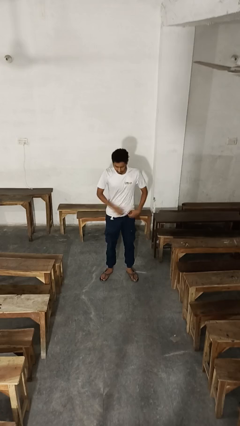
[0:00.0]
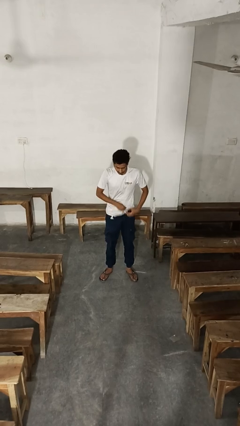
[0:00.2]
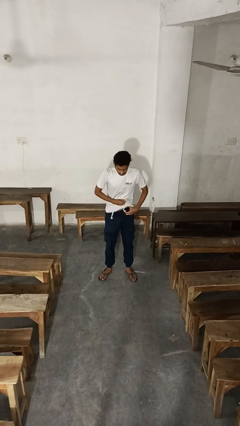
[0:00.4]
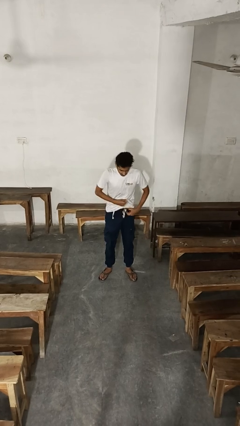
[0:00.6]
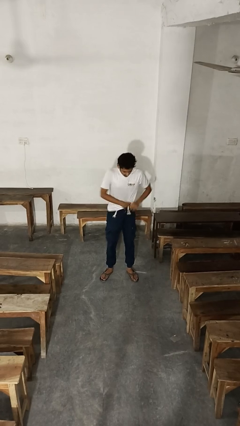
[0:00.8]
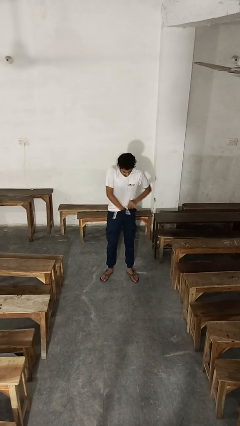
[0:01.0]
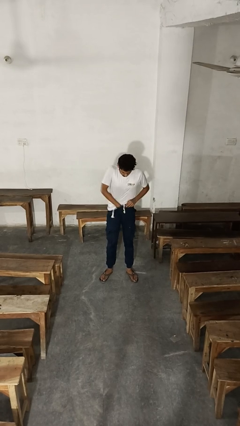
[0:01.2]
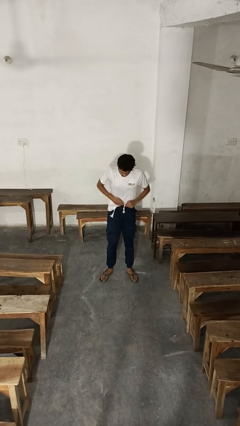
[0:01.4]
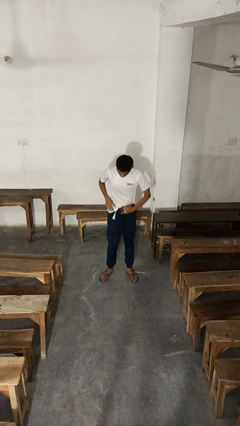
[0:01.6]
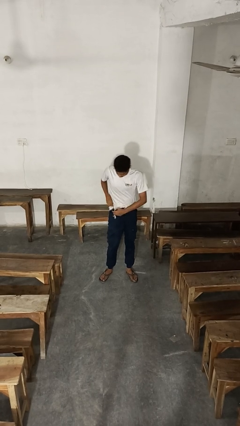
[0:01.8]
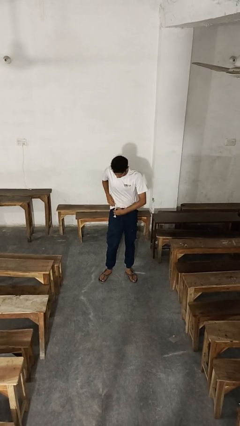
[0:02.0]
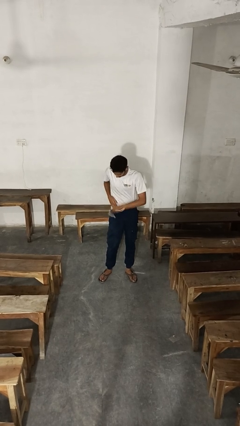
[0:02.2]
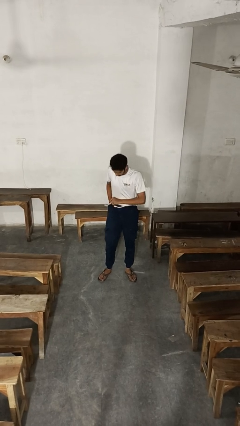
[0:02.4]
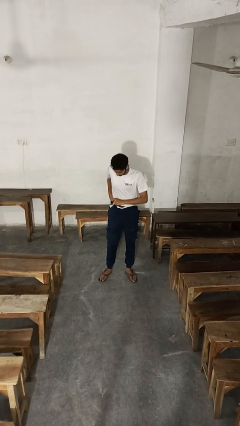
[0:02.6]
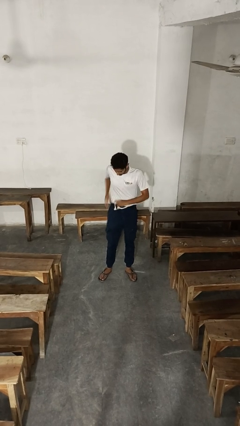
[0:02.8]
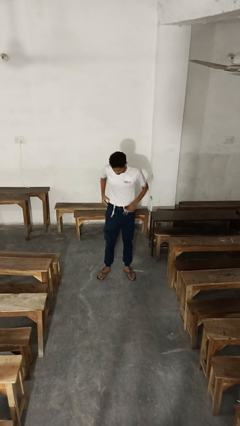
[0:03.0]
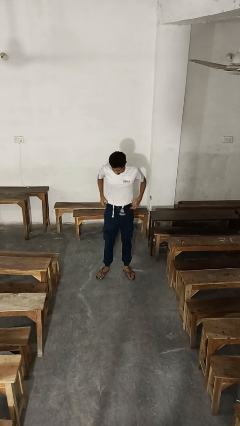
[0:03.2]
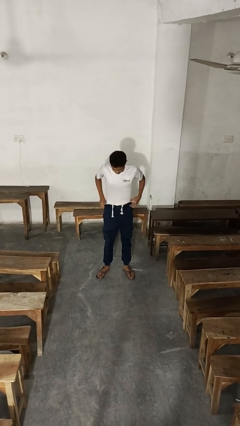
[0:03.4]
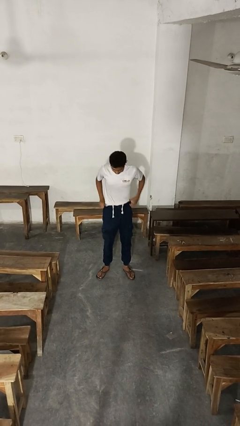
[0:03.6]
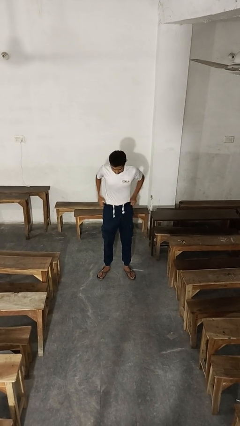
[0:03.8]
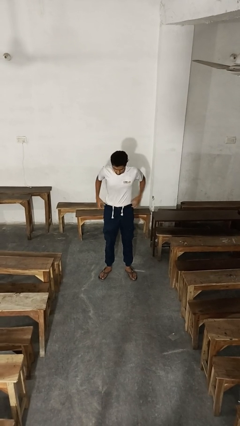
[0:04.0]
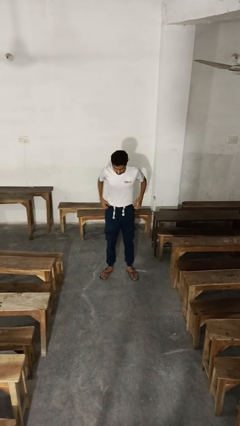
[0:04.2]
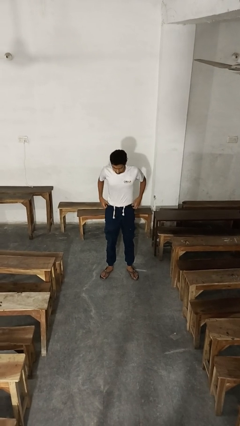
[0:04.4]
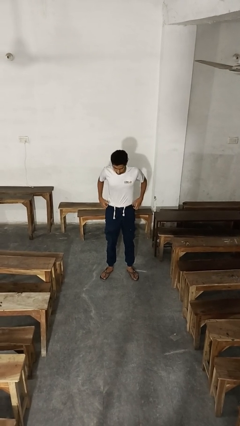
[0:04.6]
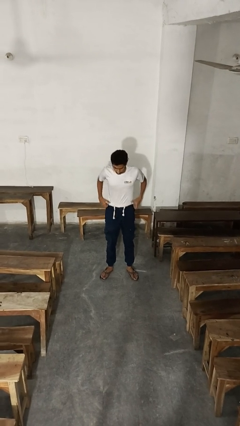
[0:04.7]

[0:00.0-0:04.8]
person tucks in shirt

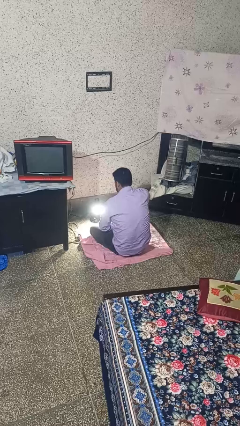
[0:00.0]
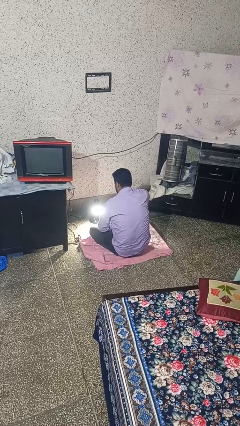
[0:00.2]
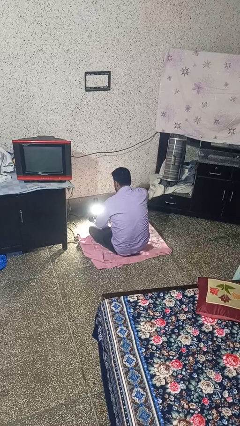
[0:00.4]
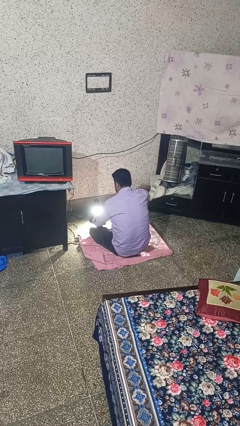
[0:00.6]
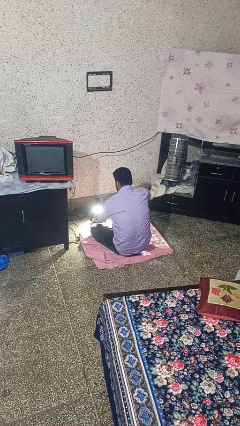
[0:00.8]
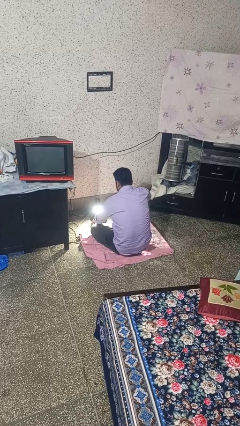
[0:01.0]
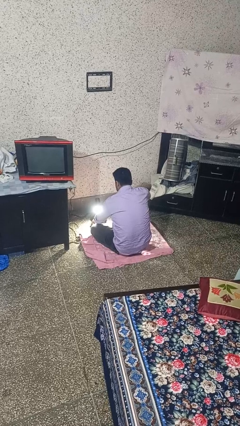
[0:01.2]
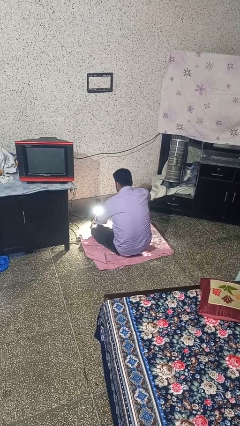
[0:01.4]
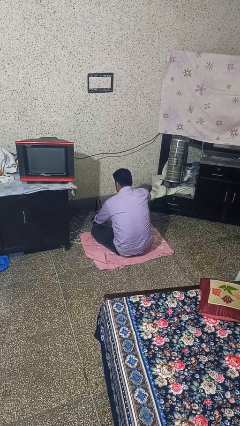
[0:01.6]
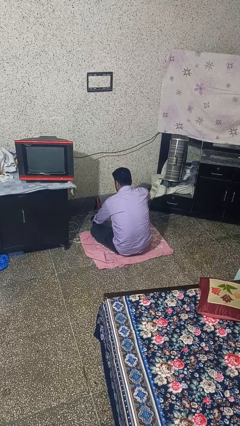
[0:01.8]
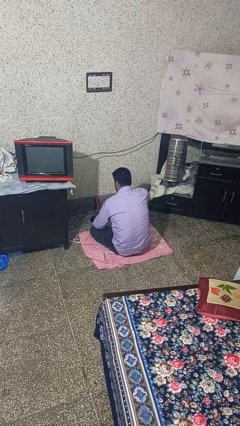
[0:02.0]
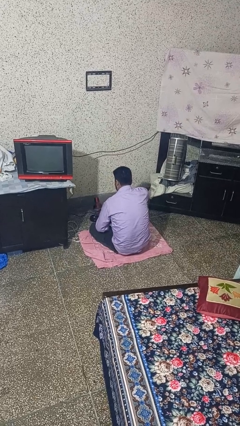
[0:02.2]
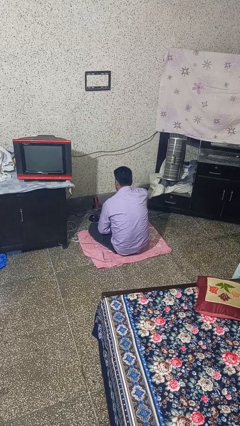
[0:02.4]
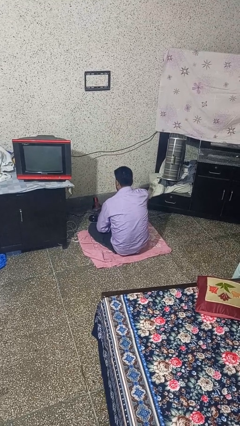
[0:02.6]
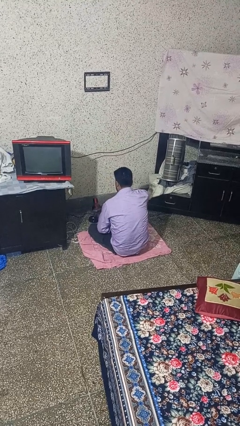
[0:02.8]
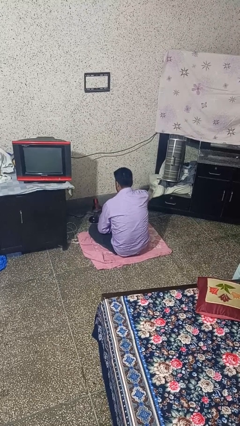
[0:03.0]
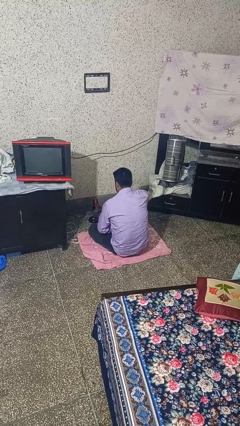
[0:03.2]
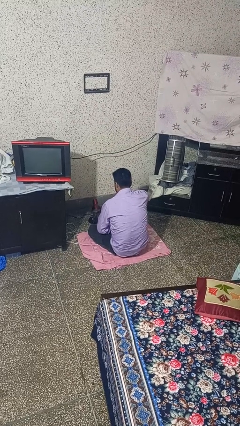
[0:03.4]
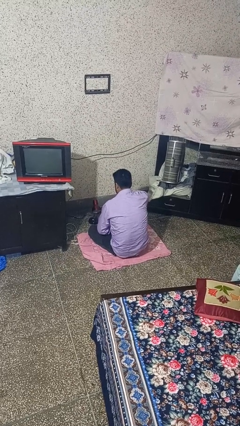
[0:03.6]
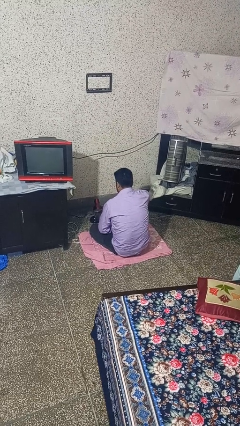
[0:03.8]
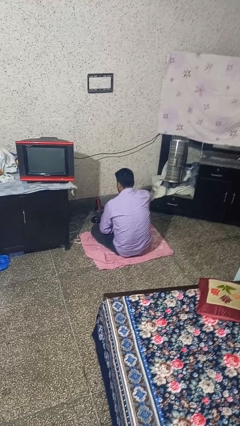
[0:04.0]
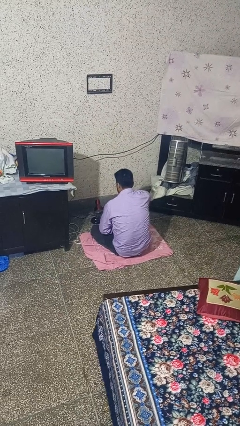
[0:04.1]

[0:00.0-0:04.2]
person turns off fan

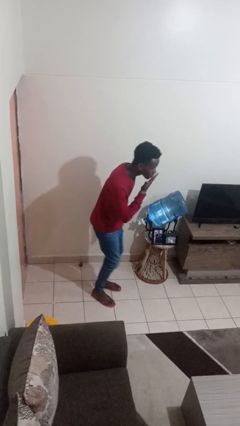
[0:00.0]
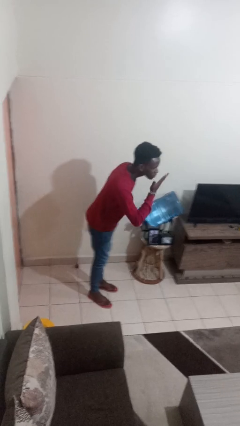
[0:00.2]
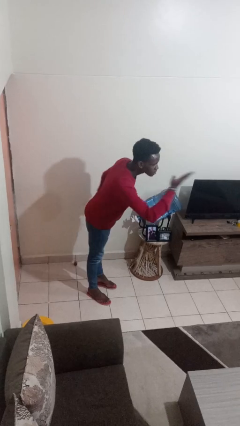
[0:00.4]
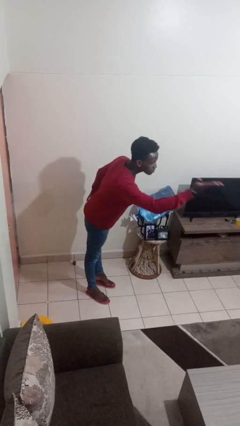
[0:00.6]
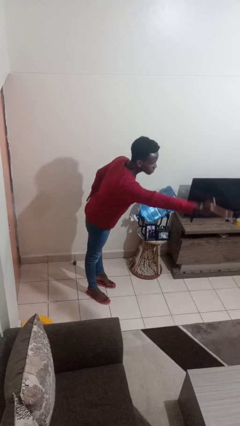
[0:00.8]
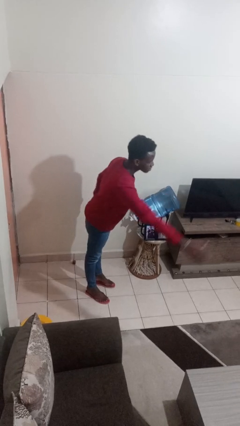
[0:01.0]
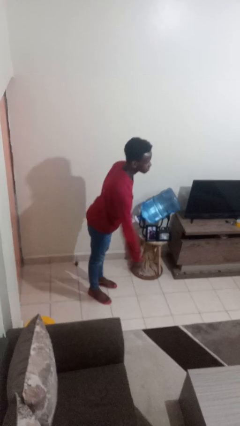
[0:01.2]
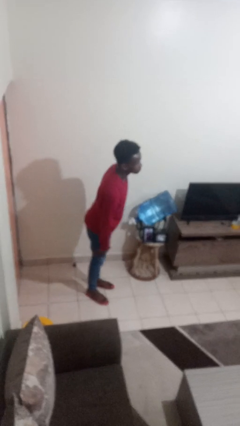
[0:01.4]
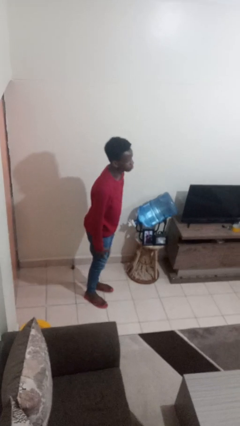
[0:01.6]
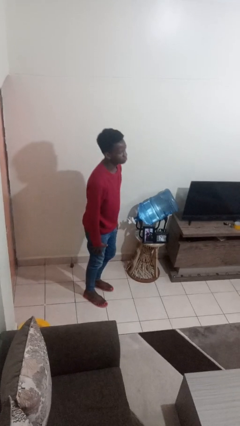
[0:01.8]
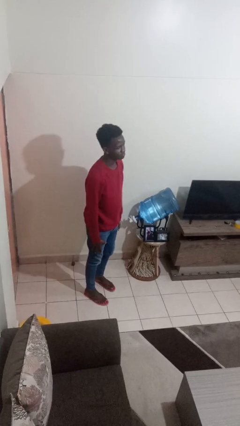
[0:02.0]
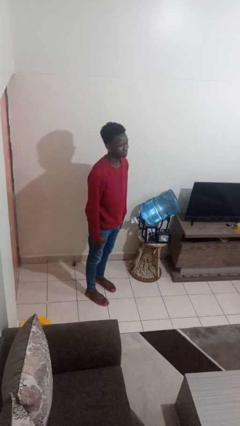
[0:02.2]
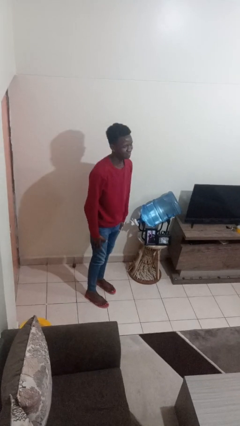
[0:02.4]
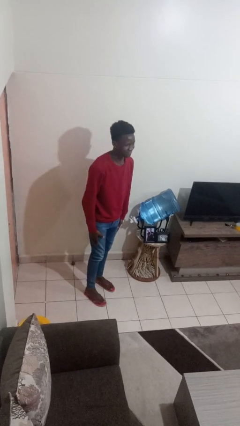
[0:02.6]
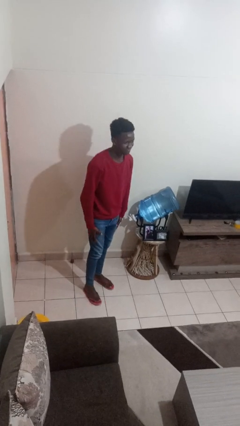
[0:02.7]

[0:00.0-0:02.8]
person gestures blow kiss

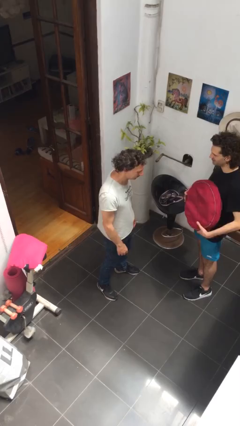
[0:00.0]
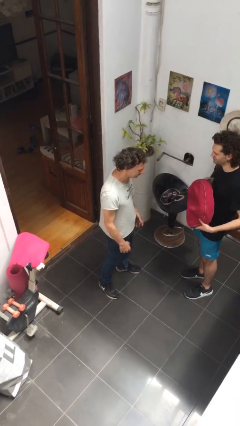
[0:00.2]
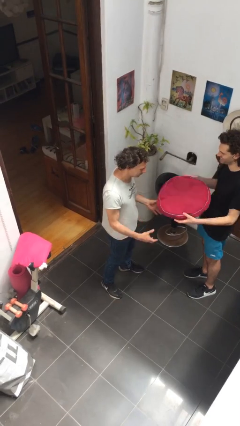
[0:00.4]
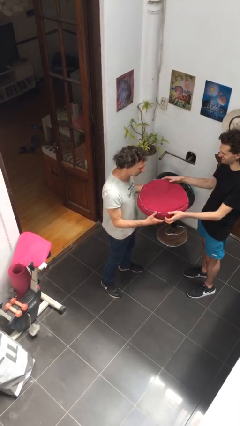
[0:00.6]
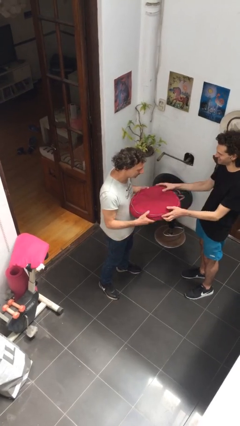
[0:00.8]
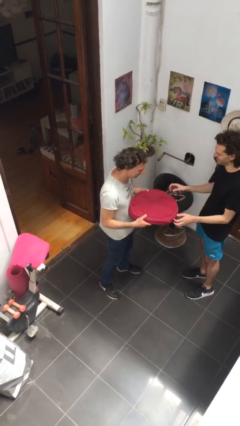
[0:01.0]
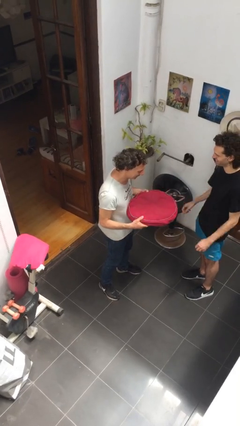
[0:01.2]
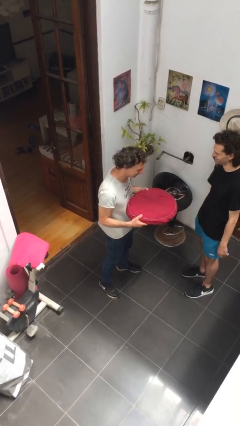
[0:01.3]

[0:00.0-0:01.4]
person transfers object to person

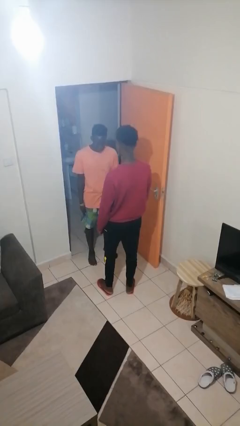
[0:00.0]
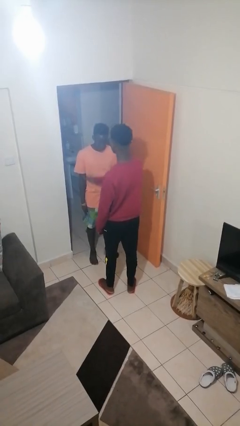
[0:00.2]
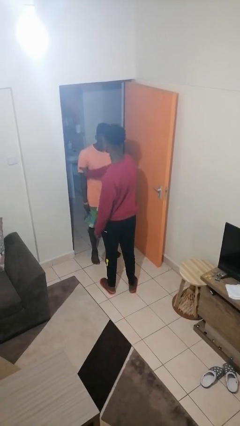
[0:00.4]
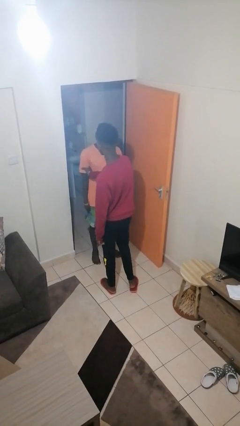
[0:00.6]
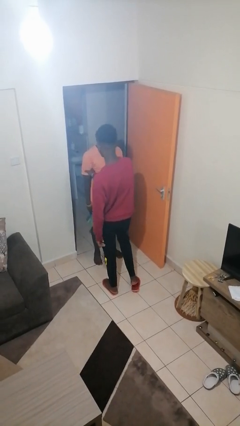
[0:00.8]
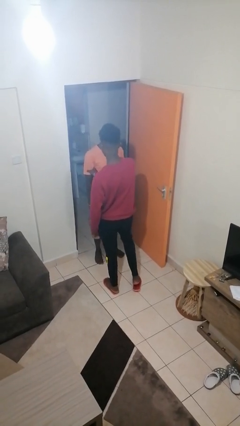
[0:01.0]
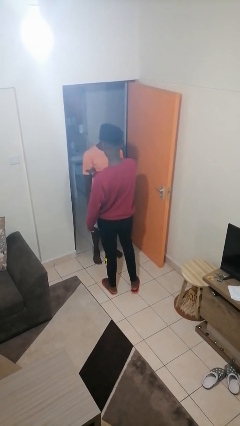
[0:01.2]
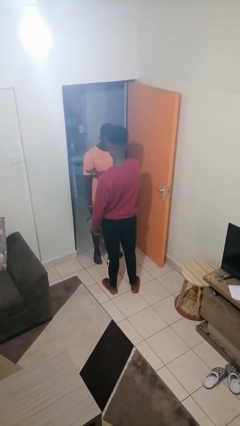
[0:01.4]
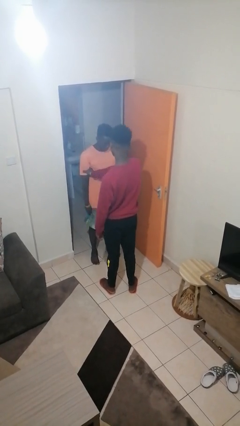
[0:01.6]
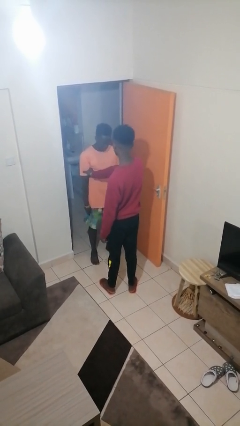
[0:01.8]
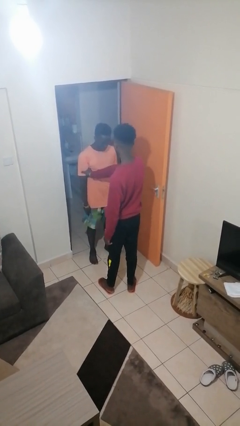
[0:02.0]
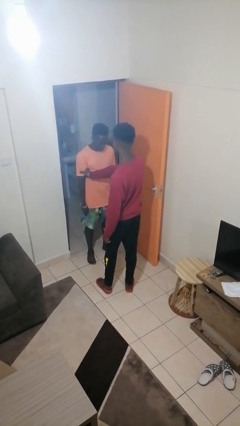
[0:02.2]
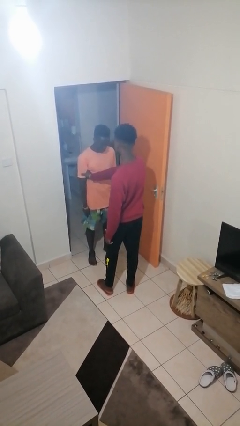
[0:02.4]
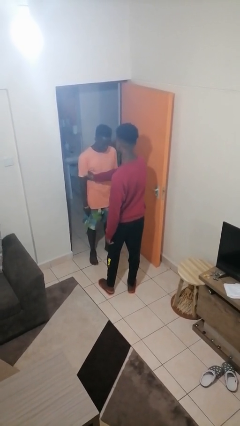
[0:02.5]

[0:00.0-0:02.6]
person grabs person by bicep

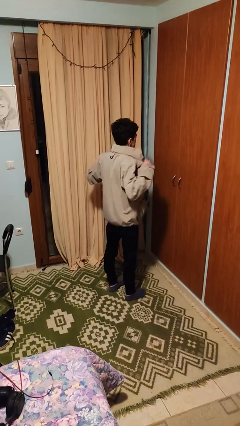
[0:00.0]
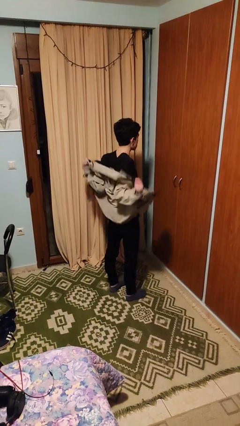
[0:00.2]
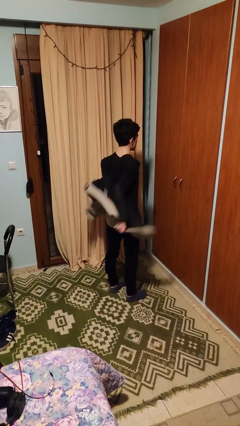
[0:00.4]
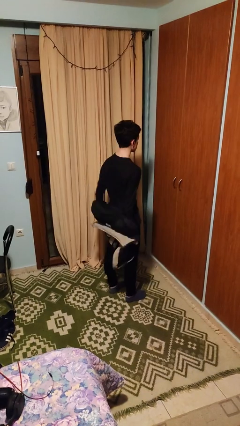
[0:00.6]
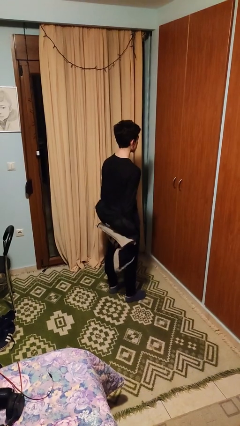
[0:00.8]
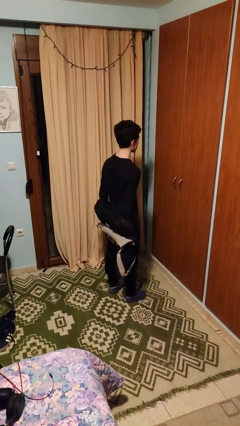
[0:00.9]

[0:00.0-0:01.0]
person takes off jacket

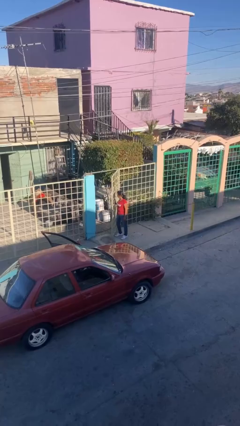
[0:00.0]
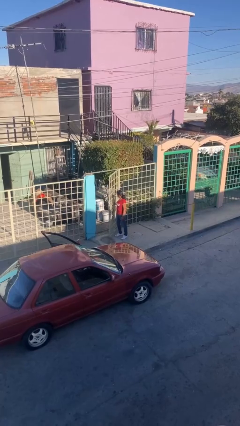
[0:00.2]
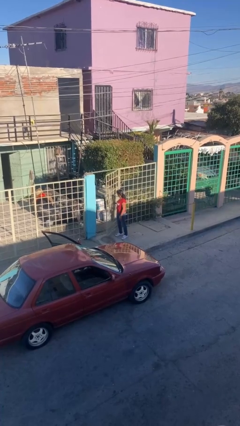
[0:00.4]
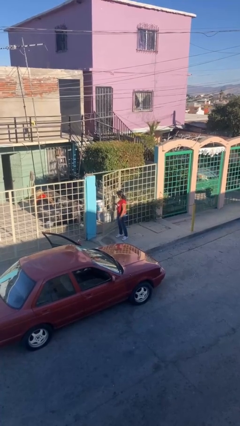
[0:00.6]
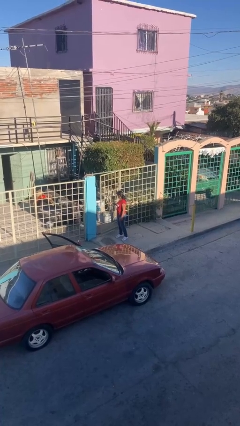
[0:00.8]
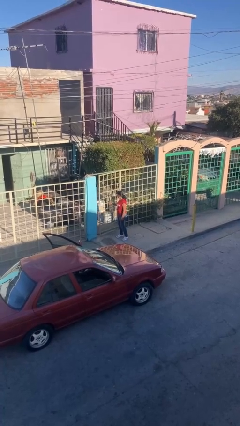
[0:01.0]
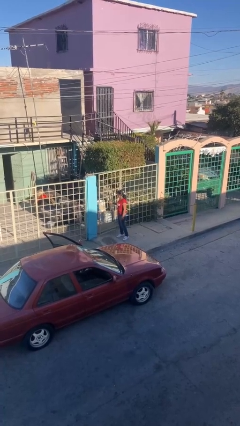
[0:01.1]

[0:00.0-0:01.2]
person closes facility door
